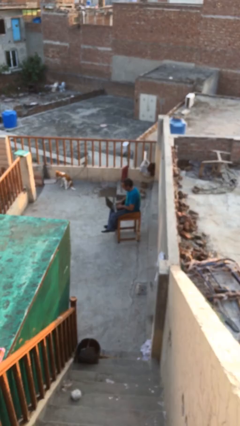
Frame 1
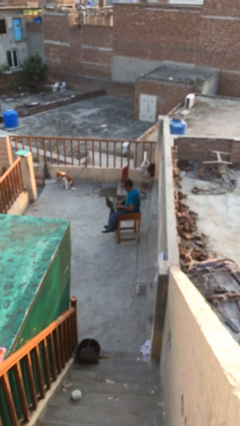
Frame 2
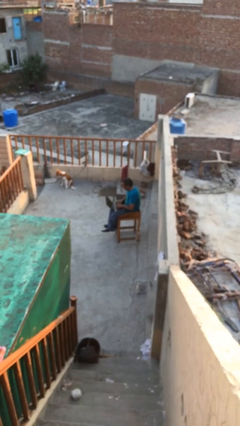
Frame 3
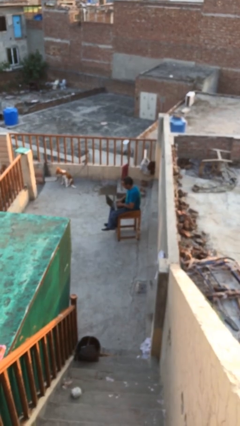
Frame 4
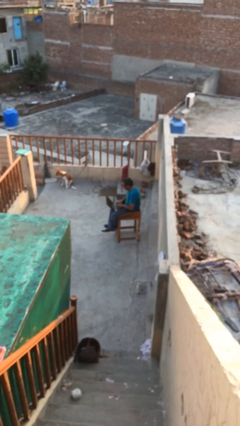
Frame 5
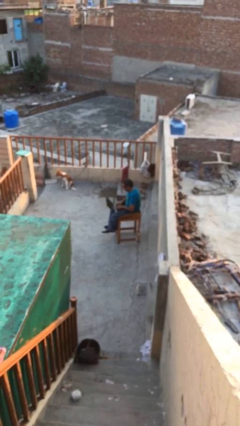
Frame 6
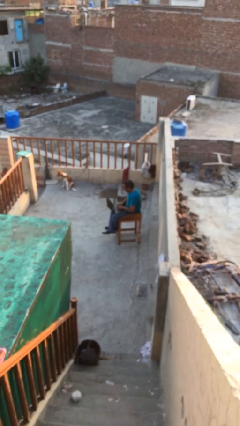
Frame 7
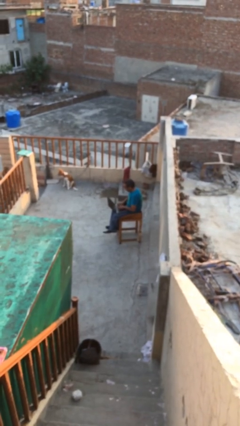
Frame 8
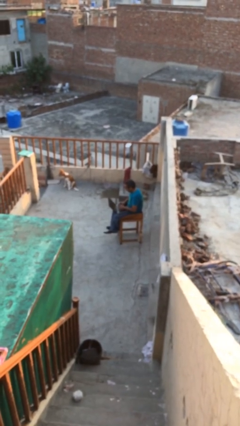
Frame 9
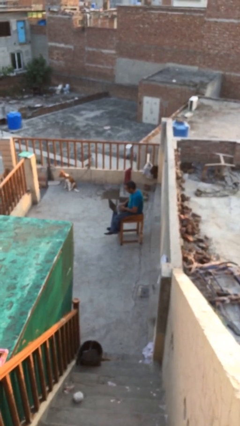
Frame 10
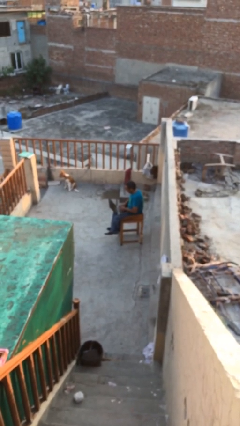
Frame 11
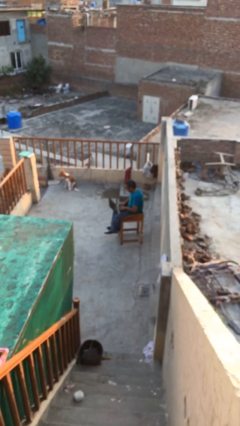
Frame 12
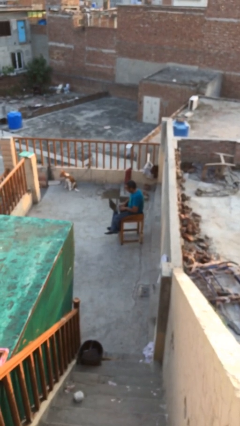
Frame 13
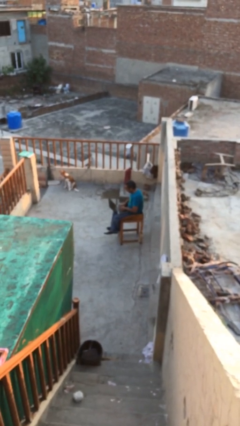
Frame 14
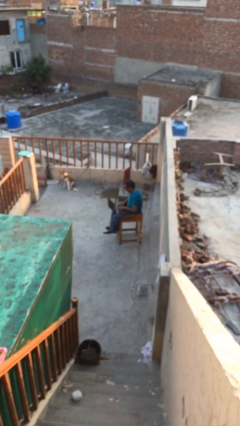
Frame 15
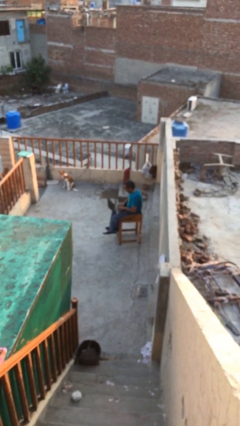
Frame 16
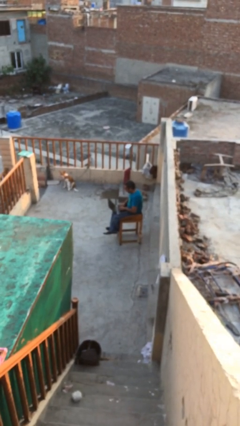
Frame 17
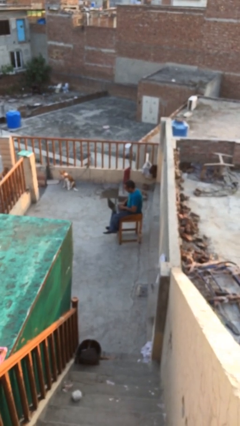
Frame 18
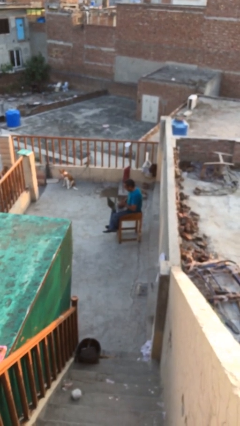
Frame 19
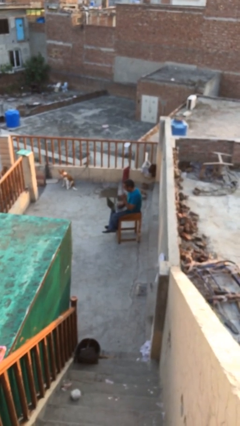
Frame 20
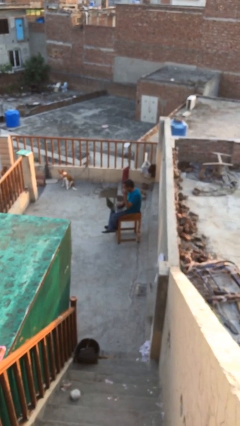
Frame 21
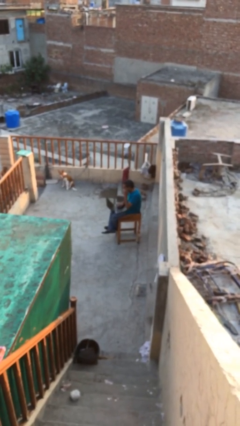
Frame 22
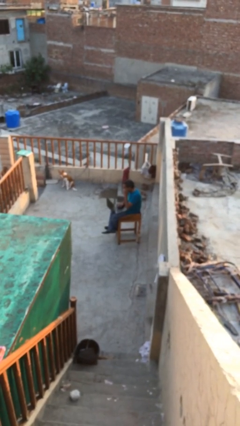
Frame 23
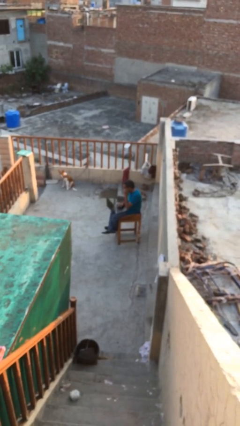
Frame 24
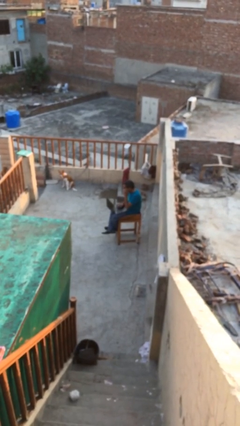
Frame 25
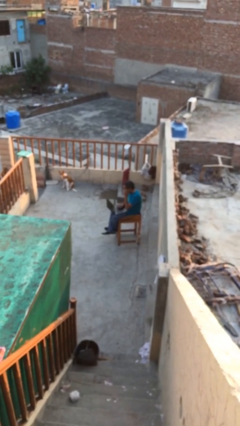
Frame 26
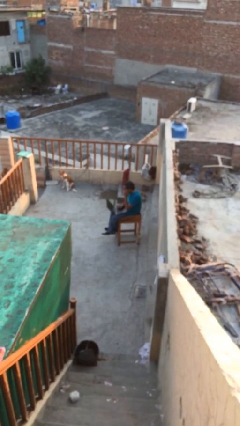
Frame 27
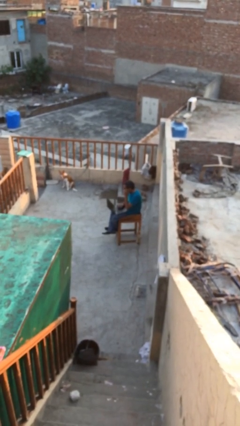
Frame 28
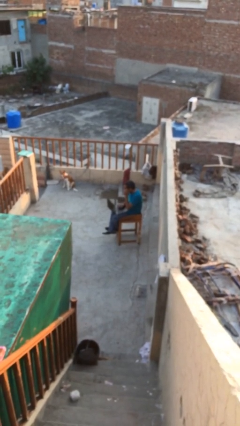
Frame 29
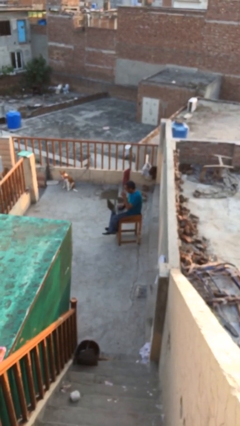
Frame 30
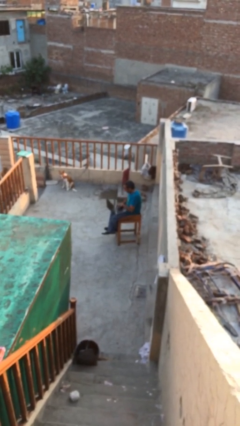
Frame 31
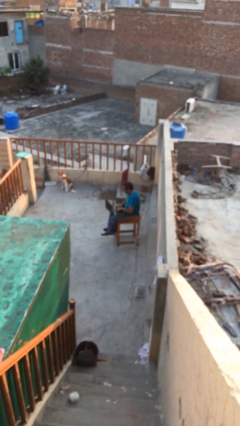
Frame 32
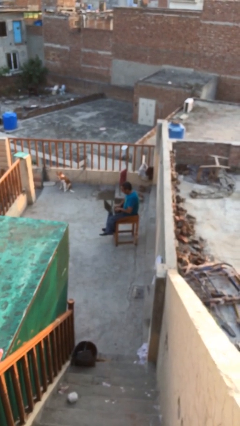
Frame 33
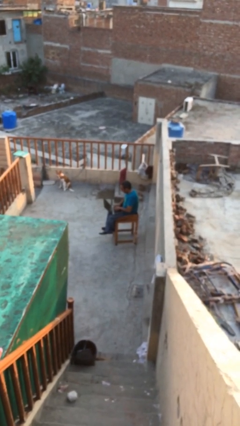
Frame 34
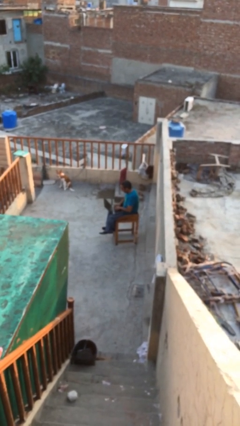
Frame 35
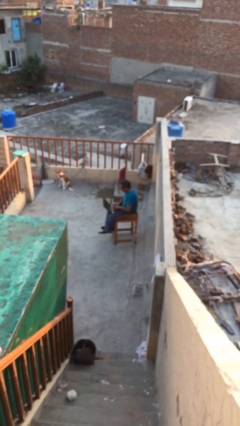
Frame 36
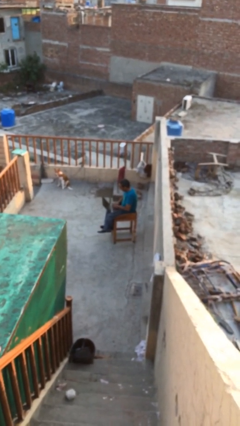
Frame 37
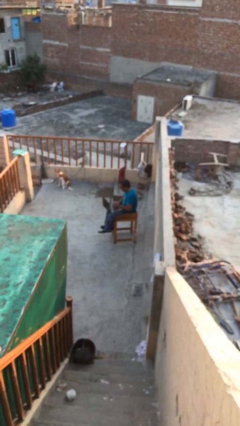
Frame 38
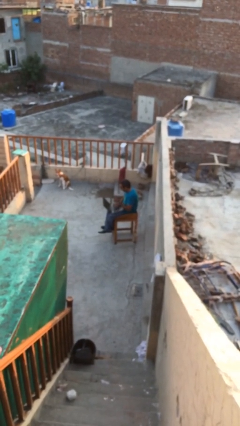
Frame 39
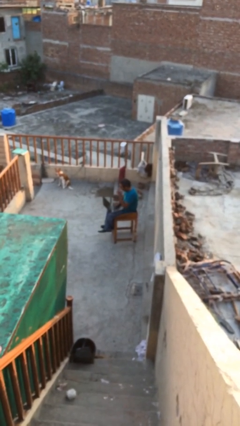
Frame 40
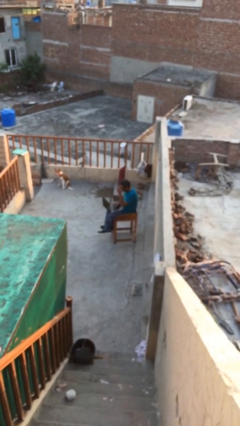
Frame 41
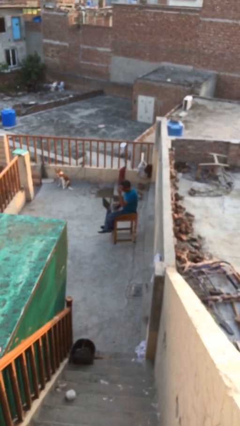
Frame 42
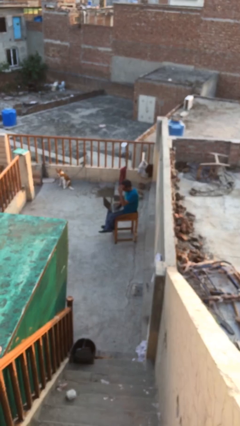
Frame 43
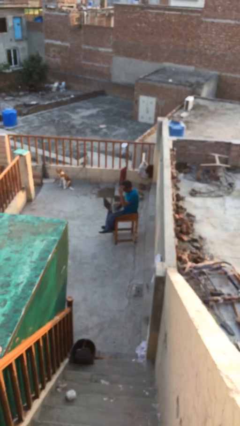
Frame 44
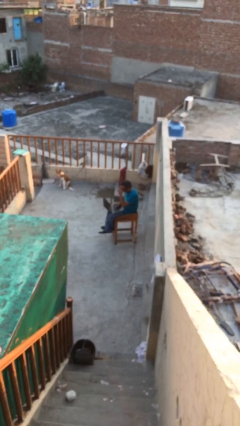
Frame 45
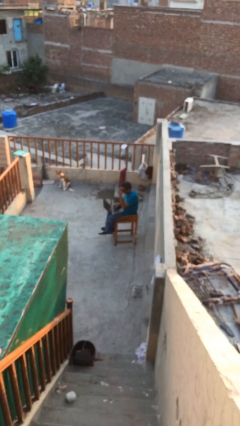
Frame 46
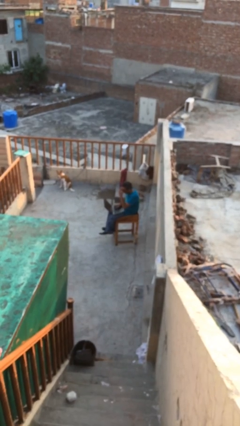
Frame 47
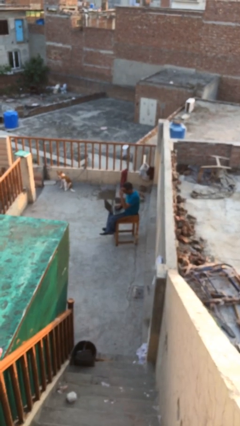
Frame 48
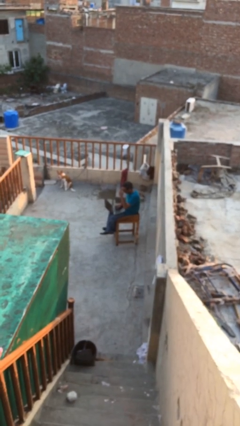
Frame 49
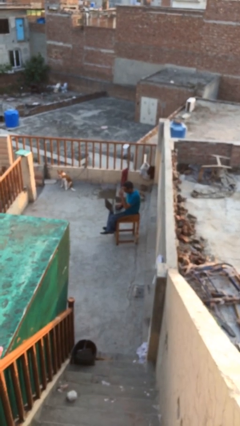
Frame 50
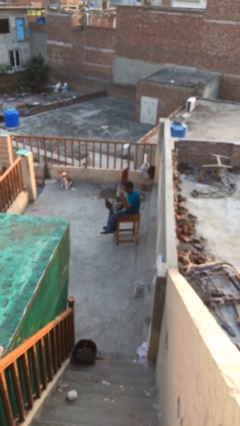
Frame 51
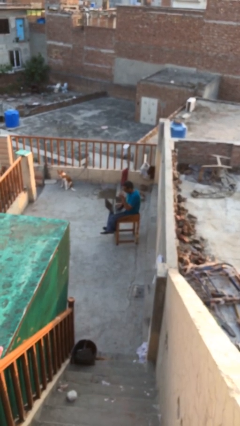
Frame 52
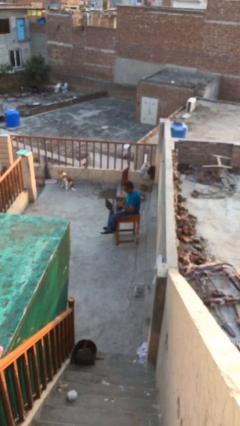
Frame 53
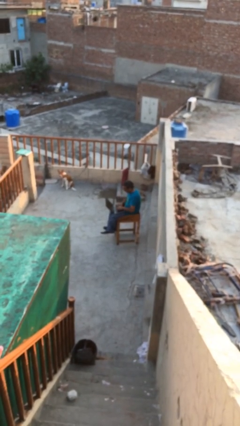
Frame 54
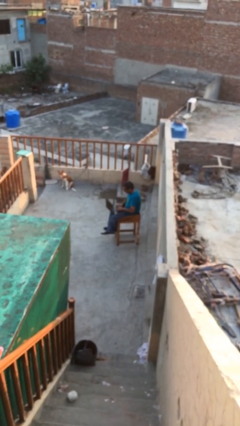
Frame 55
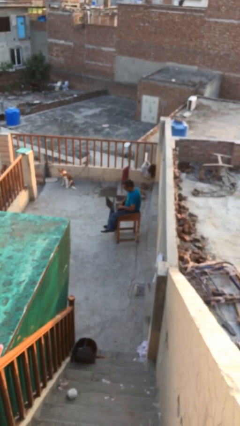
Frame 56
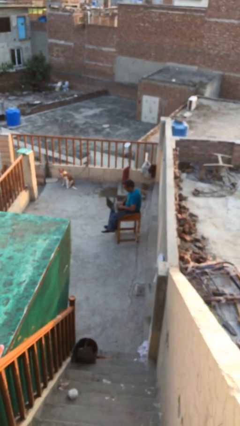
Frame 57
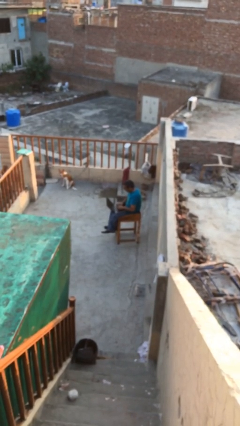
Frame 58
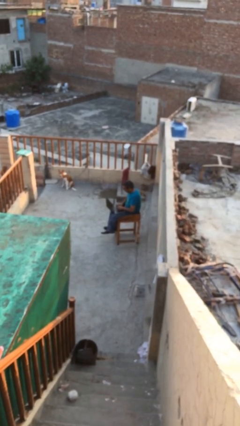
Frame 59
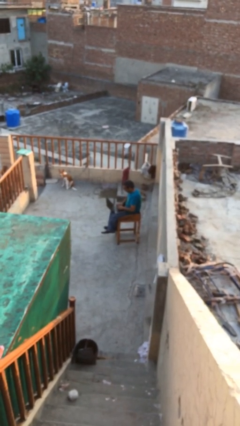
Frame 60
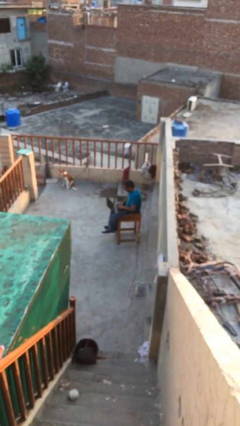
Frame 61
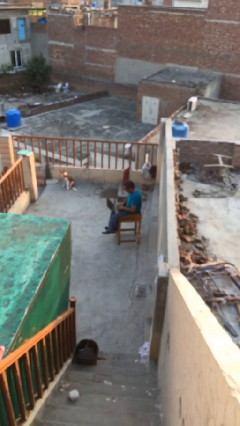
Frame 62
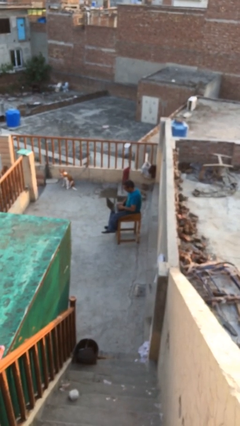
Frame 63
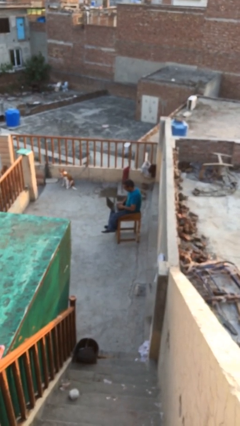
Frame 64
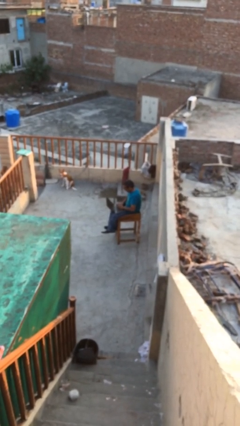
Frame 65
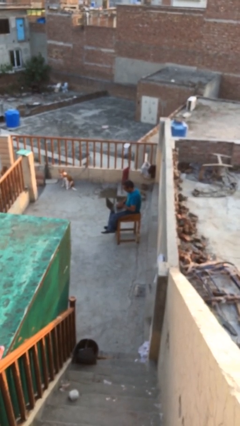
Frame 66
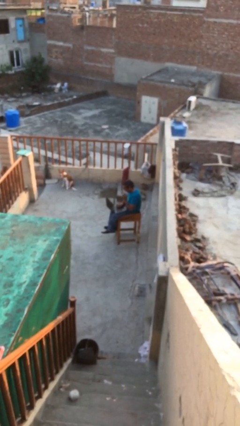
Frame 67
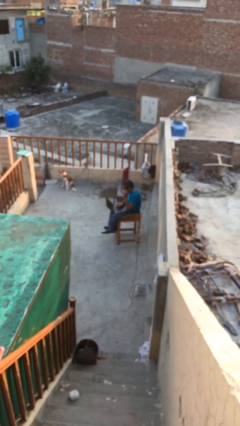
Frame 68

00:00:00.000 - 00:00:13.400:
person interacts with laptop

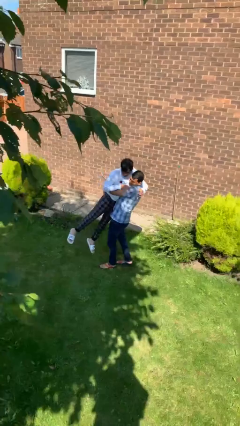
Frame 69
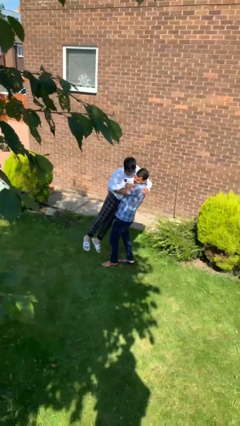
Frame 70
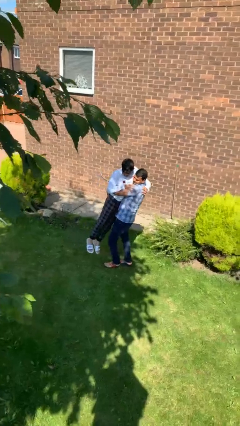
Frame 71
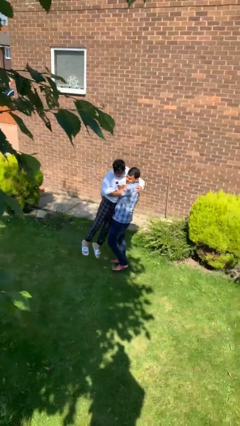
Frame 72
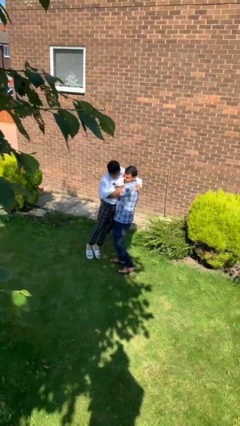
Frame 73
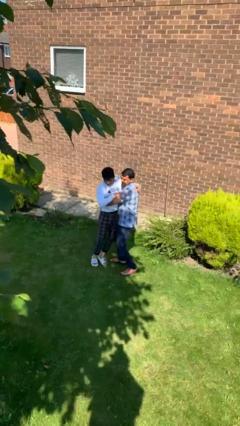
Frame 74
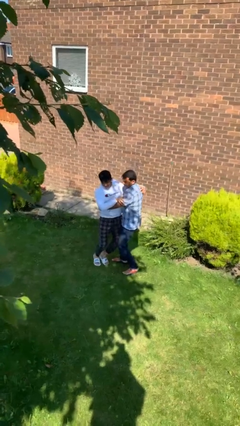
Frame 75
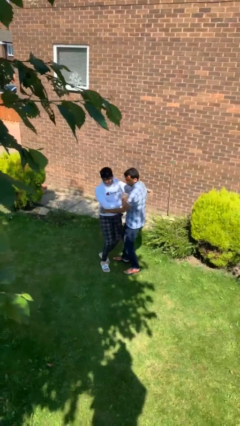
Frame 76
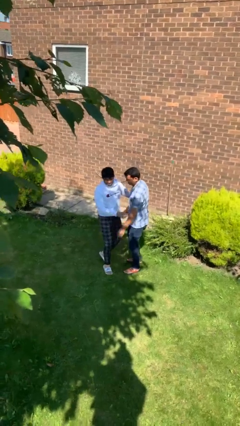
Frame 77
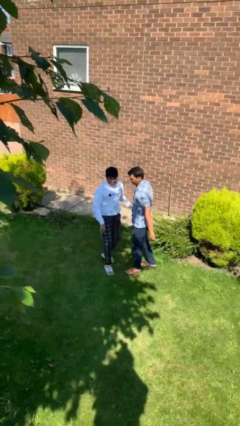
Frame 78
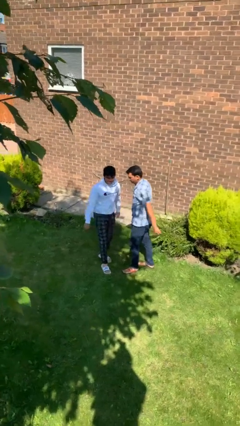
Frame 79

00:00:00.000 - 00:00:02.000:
person puts down person

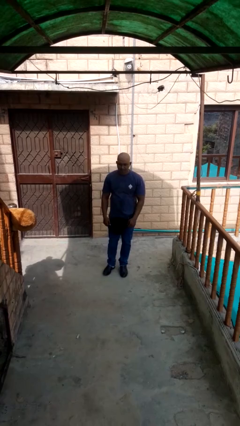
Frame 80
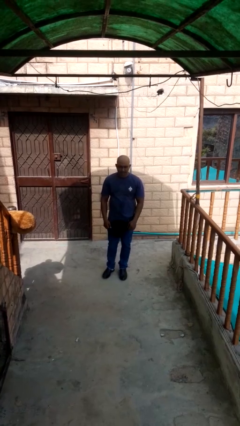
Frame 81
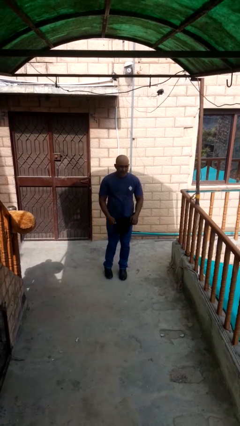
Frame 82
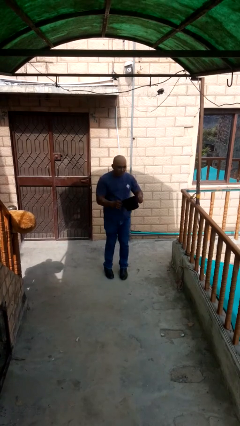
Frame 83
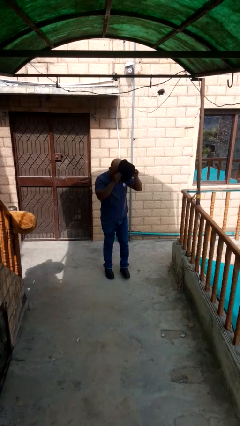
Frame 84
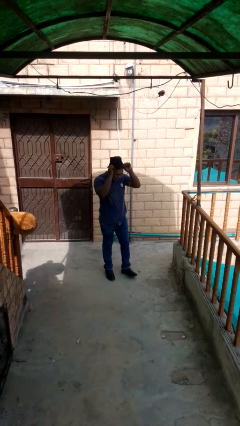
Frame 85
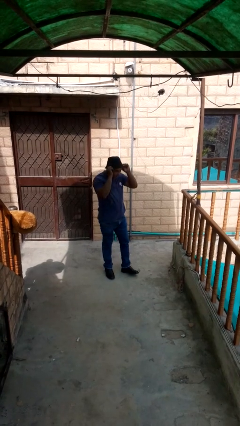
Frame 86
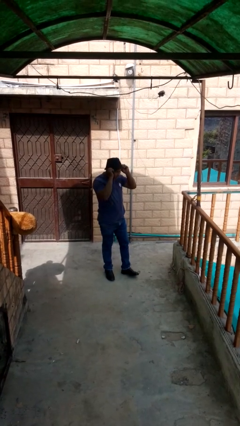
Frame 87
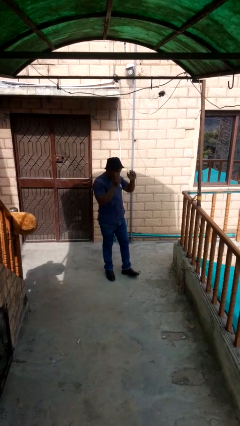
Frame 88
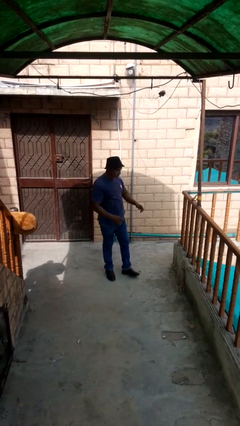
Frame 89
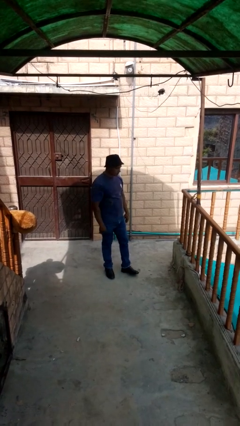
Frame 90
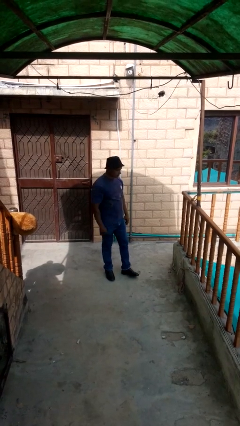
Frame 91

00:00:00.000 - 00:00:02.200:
person puts on hat

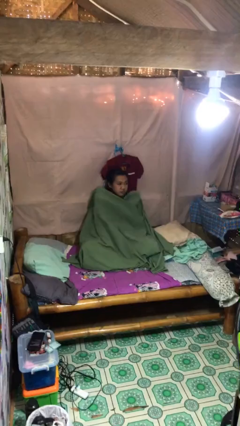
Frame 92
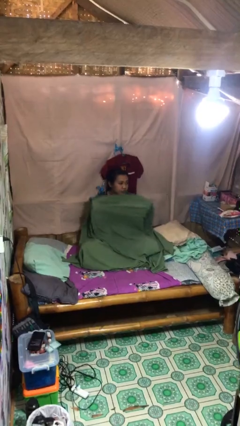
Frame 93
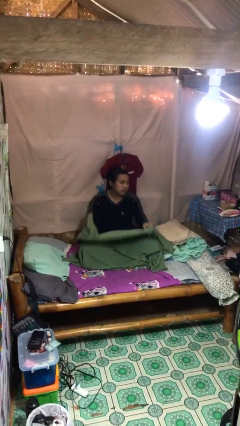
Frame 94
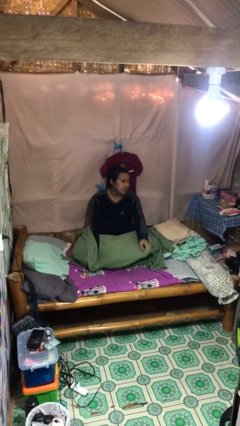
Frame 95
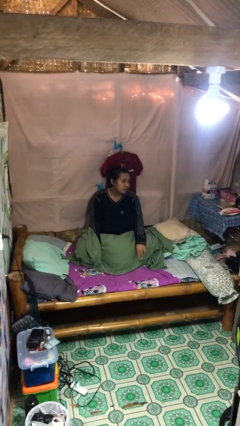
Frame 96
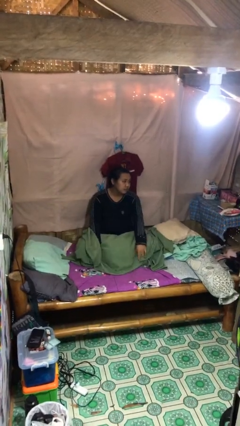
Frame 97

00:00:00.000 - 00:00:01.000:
person uncovers with blanket
